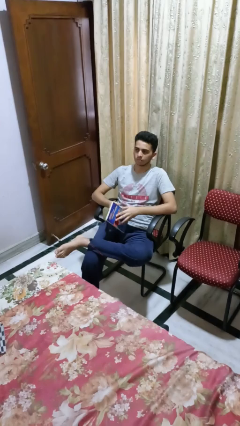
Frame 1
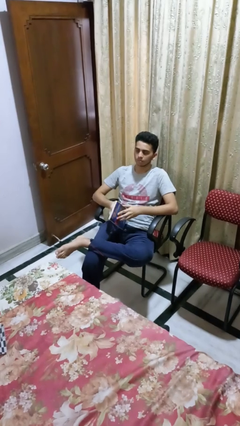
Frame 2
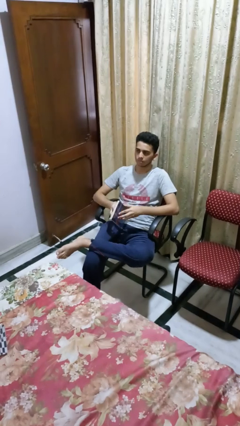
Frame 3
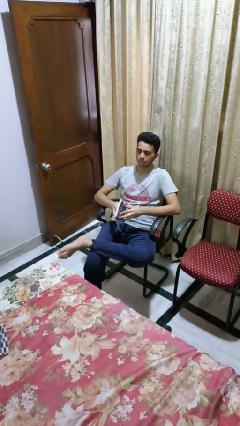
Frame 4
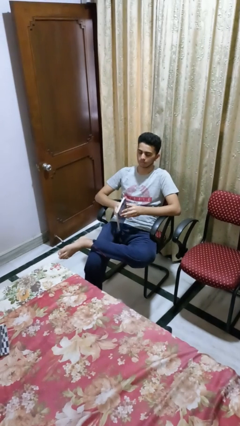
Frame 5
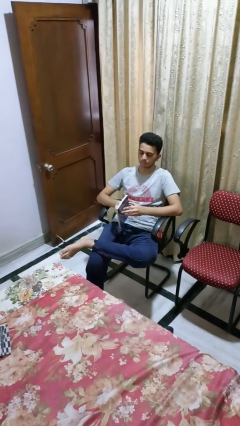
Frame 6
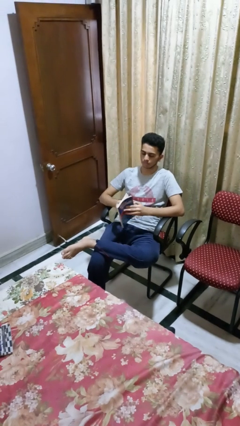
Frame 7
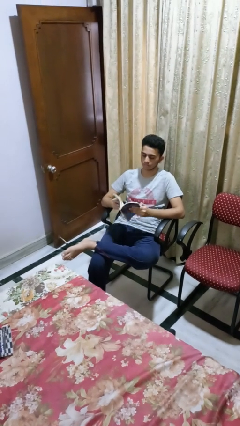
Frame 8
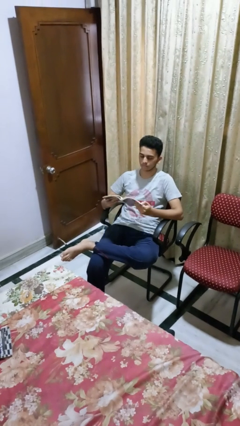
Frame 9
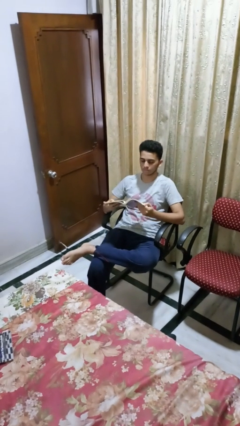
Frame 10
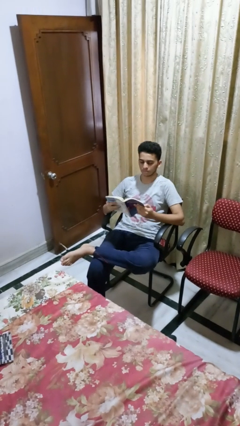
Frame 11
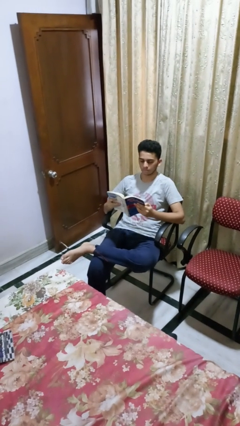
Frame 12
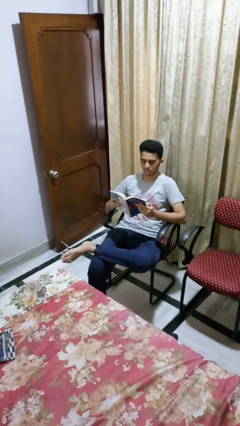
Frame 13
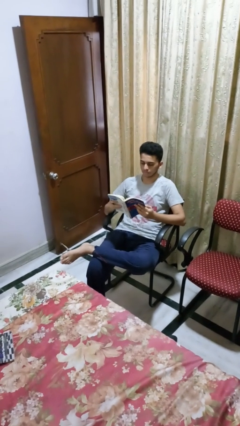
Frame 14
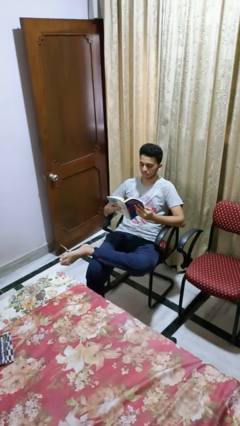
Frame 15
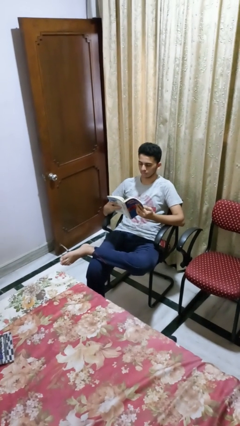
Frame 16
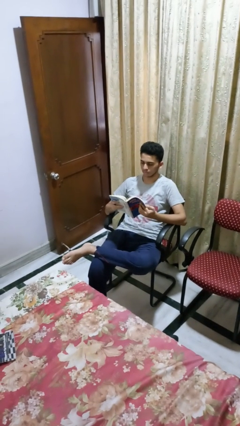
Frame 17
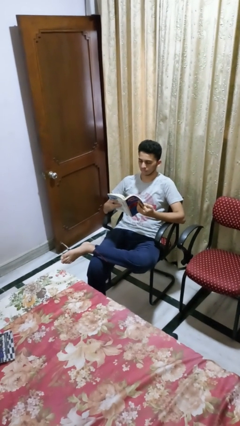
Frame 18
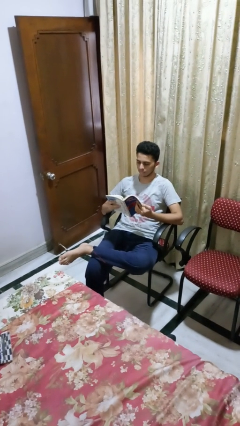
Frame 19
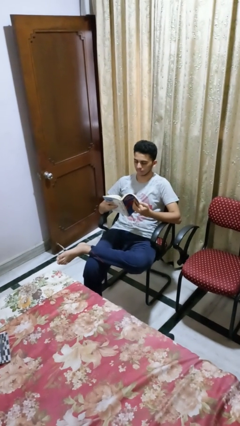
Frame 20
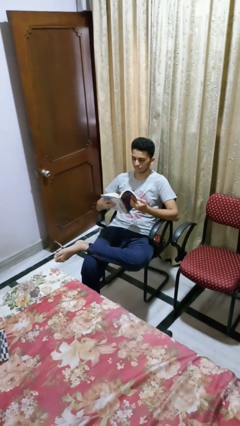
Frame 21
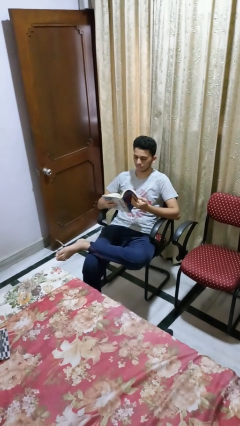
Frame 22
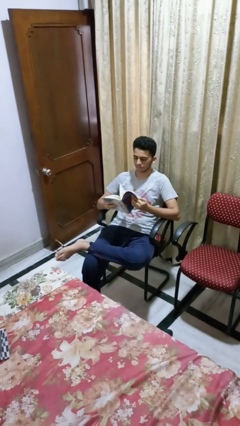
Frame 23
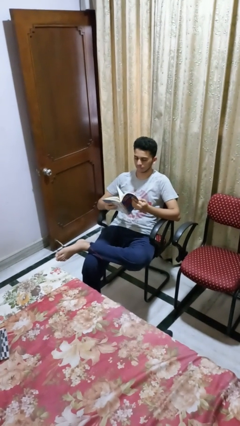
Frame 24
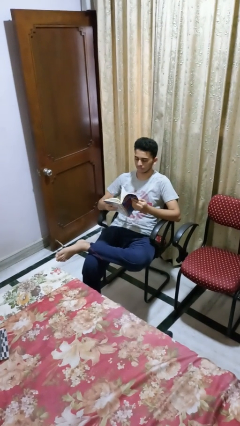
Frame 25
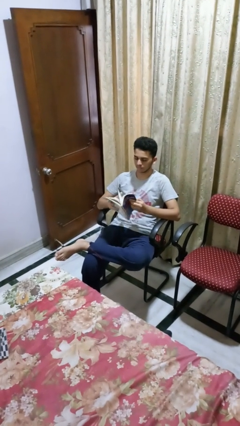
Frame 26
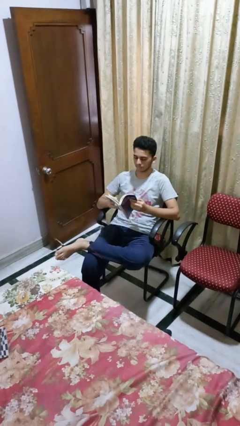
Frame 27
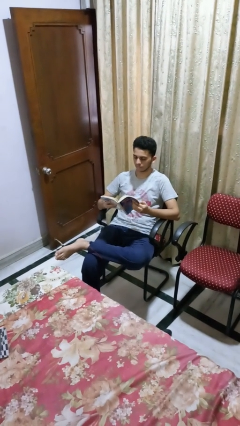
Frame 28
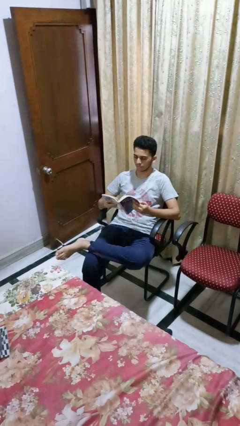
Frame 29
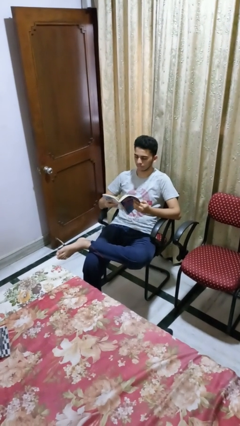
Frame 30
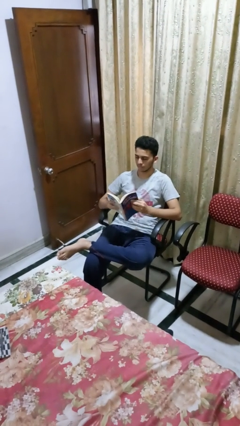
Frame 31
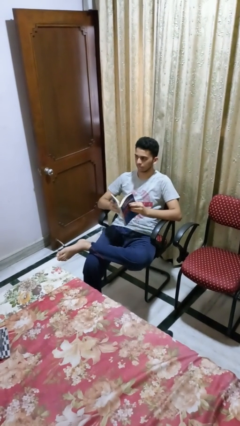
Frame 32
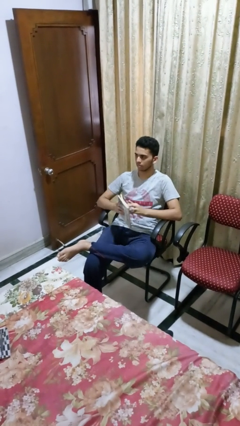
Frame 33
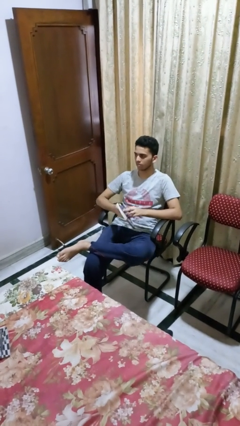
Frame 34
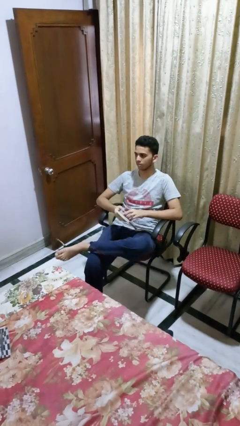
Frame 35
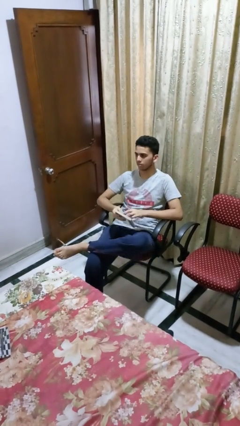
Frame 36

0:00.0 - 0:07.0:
person reads book

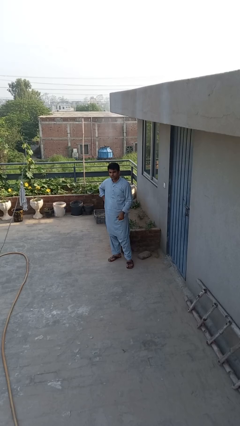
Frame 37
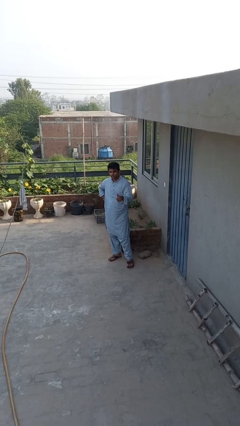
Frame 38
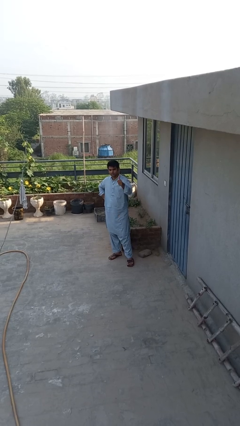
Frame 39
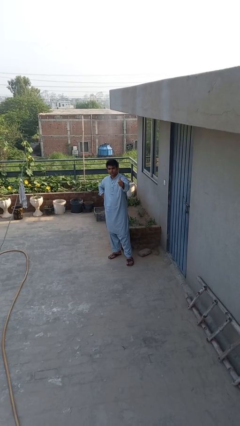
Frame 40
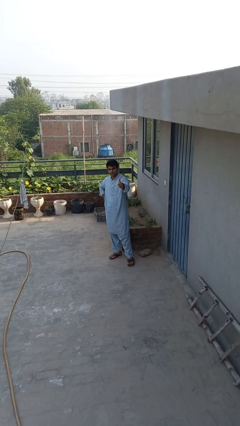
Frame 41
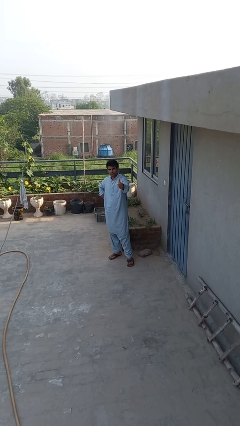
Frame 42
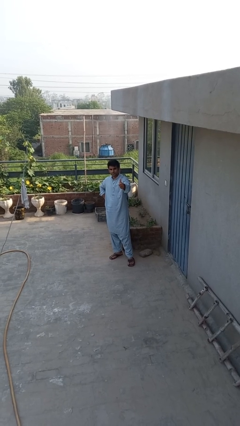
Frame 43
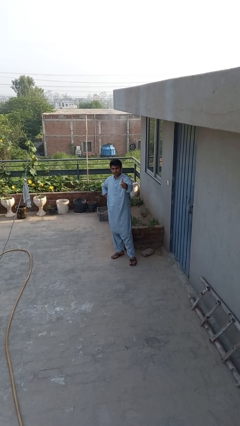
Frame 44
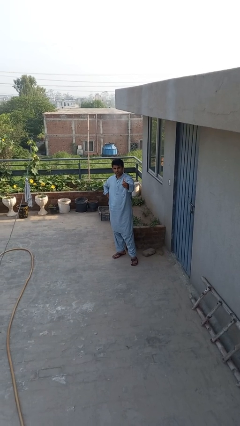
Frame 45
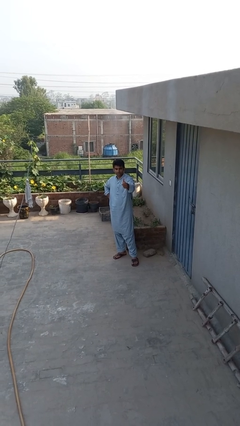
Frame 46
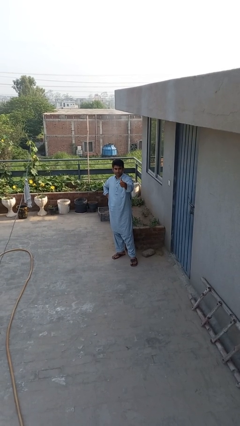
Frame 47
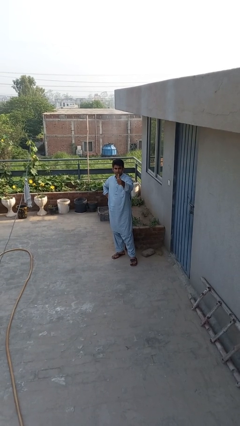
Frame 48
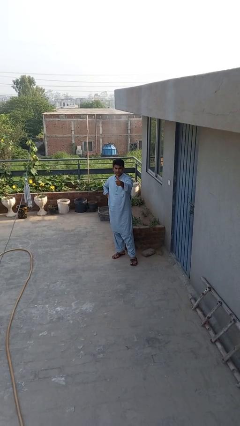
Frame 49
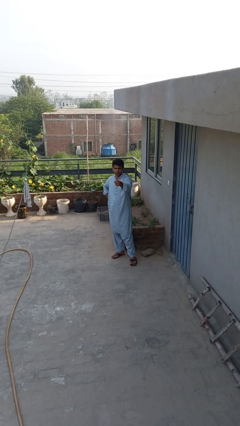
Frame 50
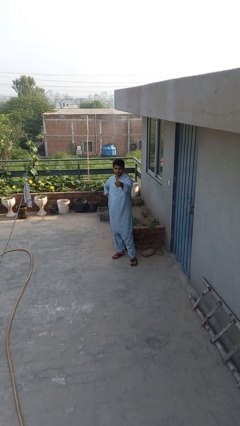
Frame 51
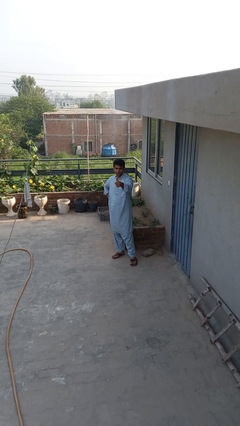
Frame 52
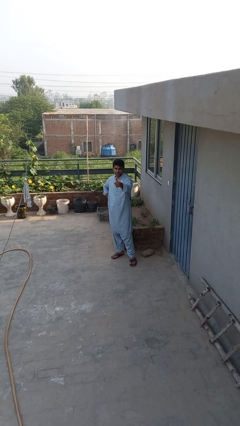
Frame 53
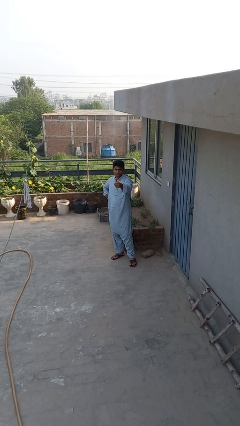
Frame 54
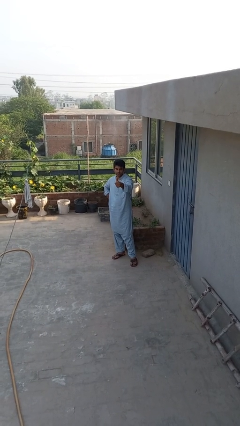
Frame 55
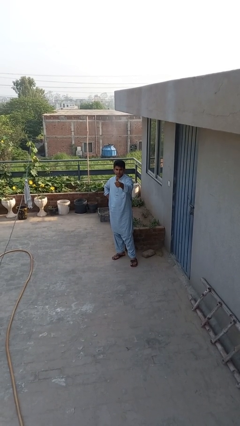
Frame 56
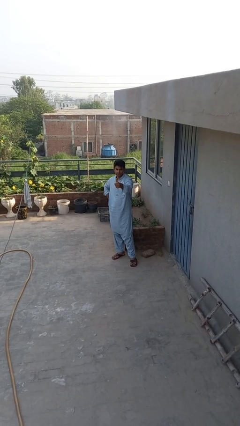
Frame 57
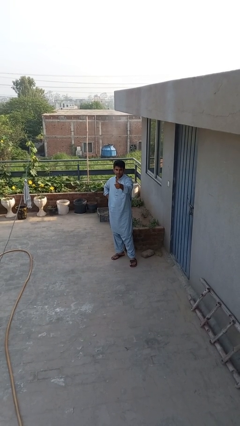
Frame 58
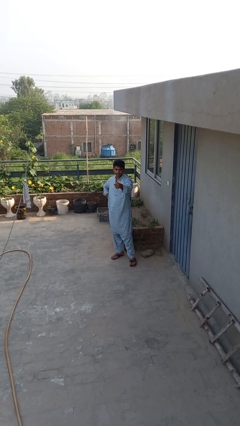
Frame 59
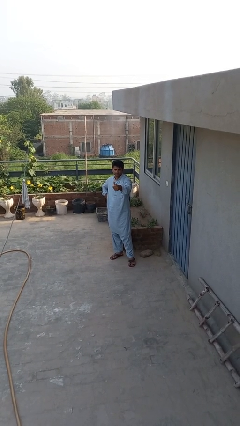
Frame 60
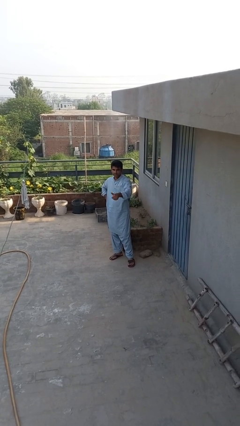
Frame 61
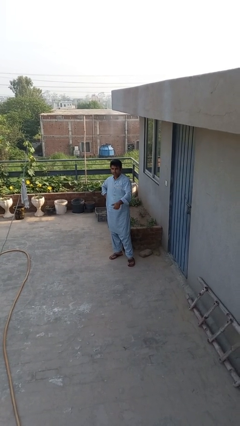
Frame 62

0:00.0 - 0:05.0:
person gestures thumbs up

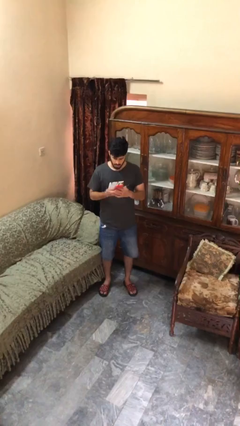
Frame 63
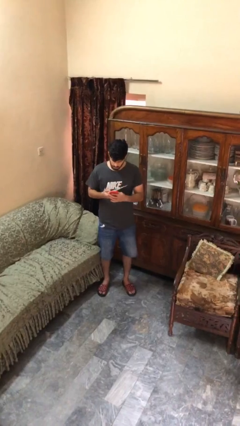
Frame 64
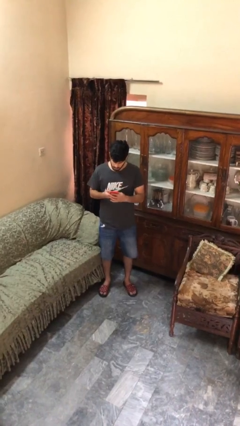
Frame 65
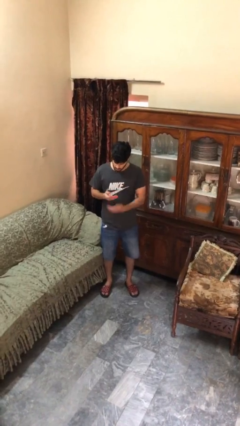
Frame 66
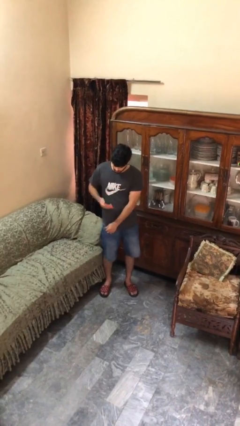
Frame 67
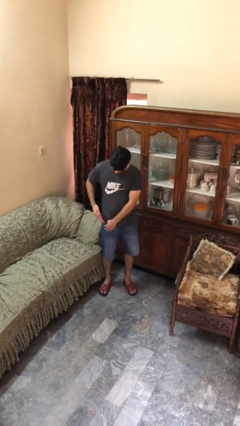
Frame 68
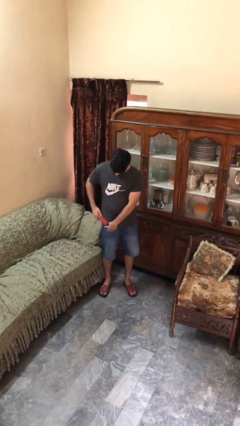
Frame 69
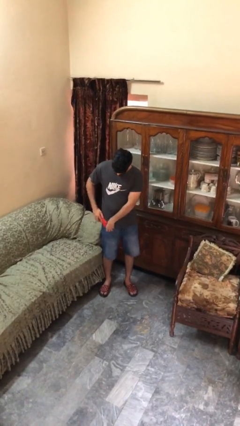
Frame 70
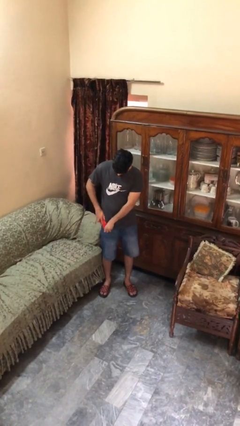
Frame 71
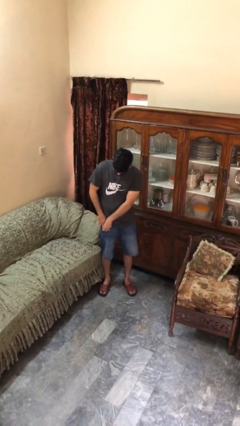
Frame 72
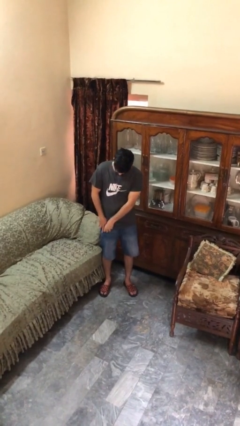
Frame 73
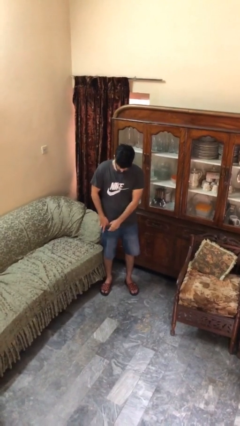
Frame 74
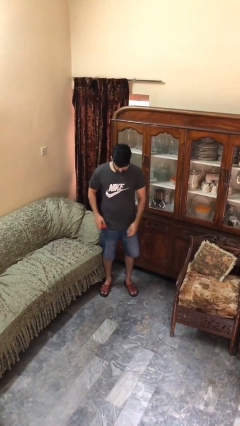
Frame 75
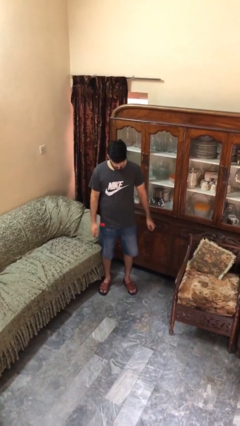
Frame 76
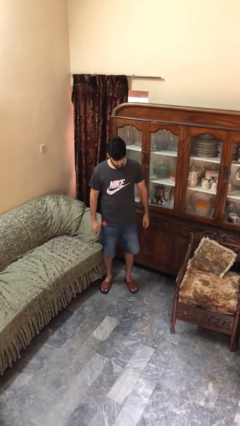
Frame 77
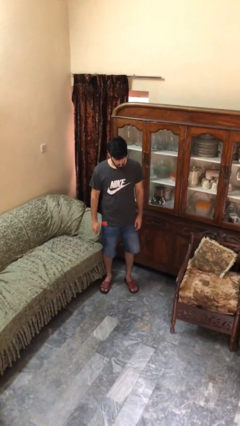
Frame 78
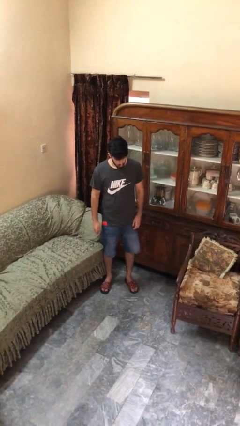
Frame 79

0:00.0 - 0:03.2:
person puts phone into pocket

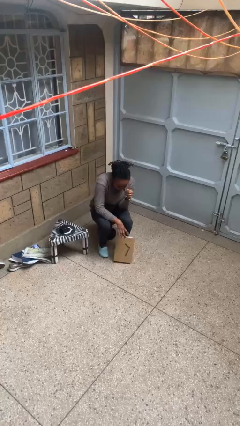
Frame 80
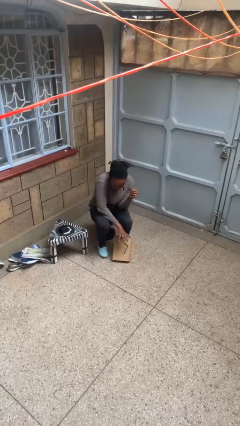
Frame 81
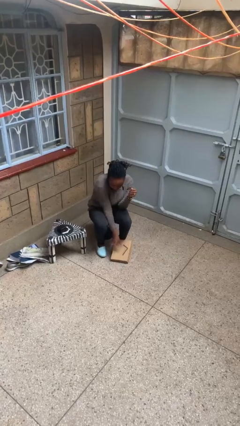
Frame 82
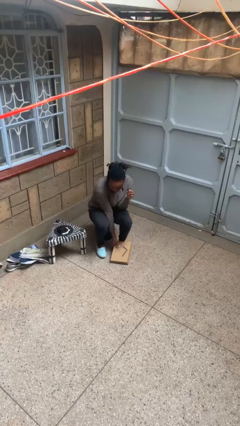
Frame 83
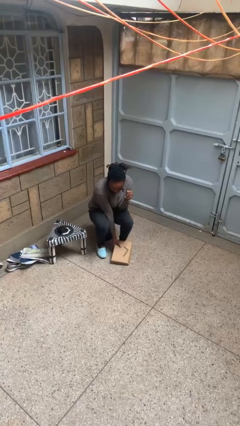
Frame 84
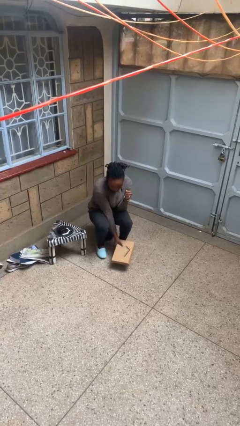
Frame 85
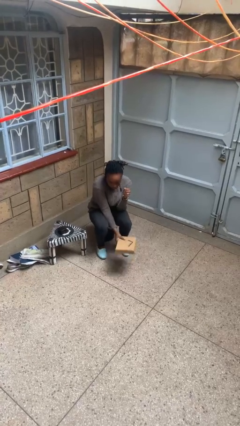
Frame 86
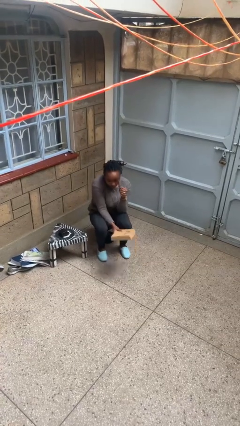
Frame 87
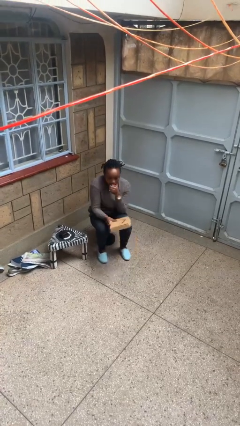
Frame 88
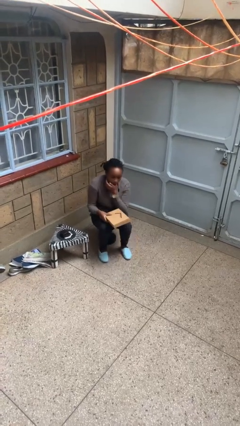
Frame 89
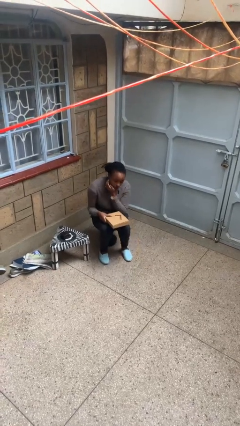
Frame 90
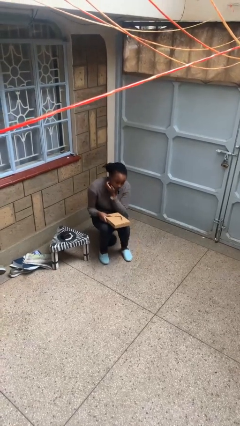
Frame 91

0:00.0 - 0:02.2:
person picks up object from floor

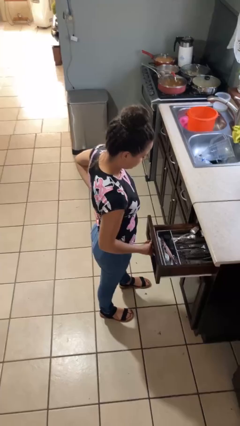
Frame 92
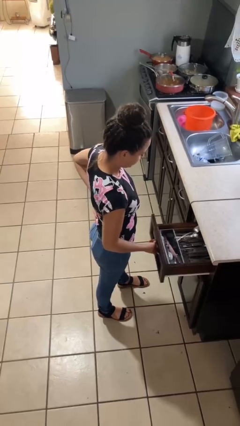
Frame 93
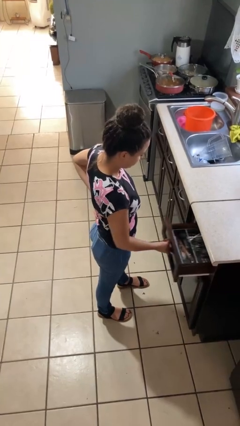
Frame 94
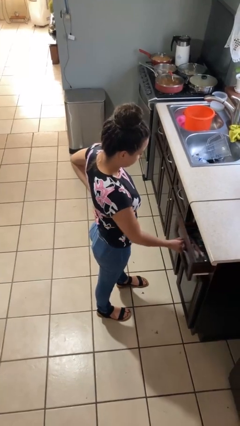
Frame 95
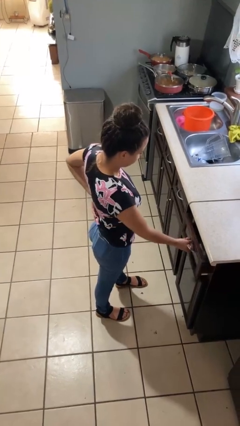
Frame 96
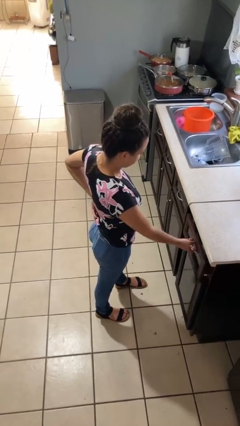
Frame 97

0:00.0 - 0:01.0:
person closes kitchen drawer
